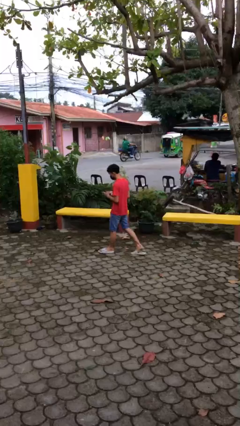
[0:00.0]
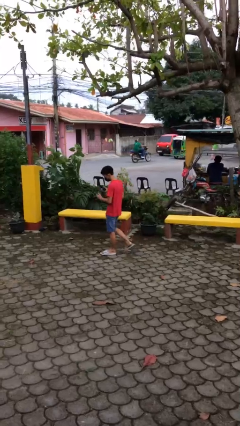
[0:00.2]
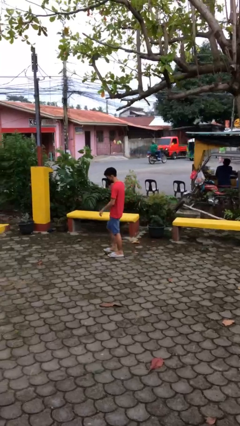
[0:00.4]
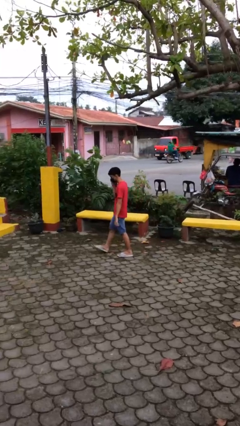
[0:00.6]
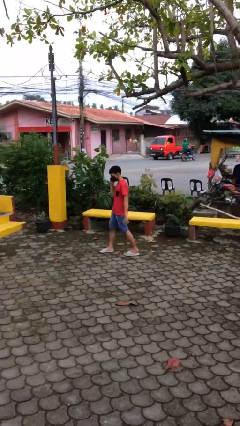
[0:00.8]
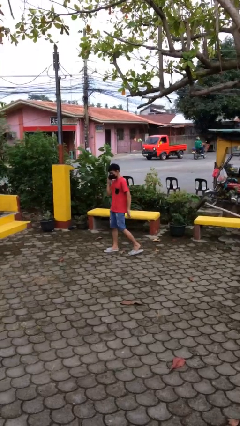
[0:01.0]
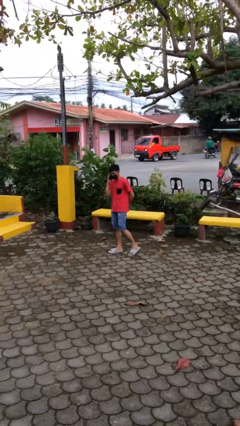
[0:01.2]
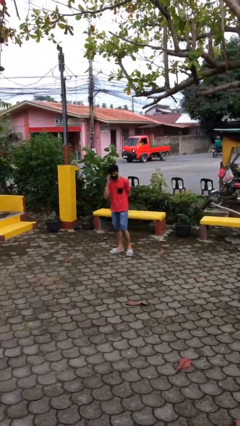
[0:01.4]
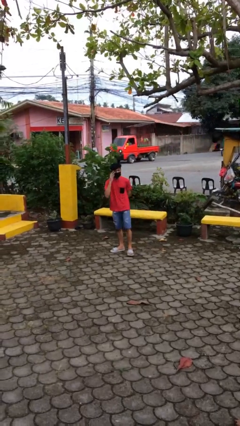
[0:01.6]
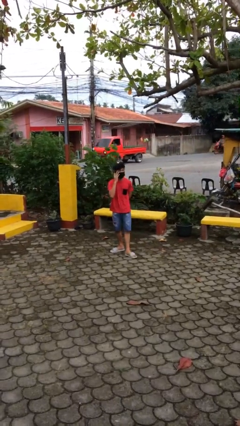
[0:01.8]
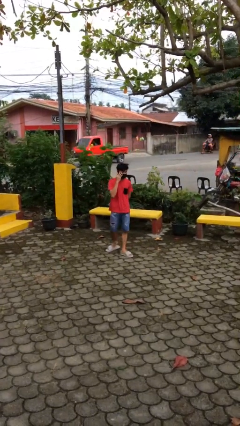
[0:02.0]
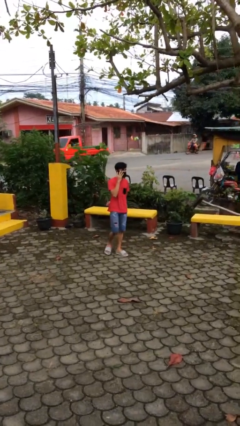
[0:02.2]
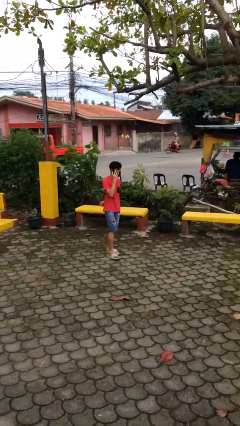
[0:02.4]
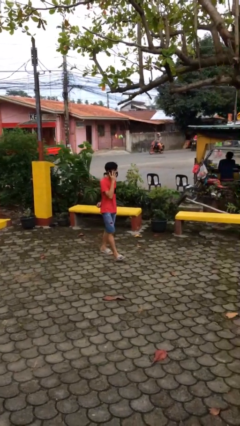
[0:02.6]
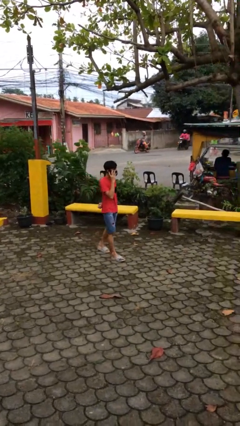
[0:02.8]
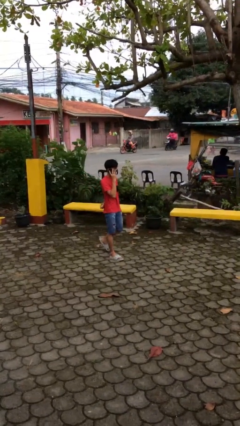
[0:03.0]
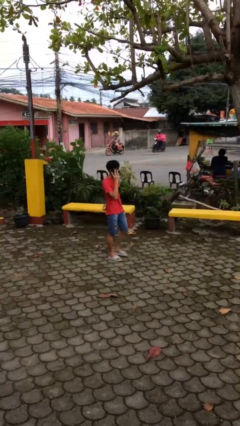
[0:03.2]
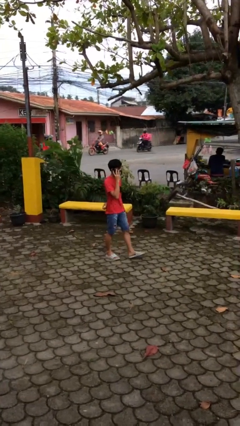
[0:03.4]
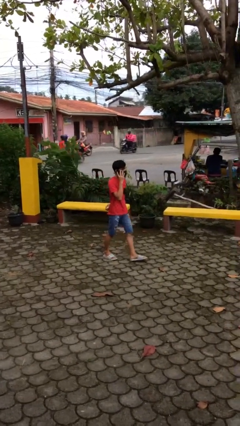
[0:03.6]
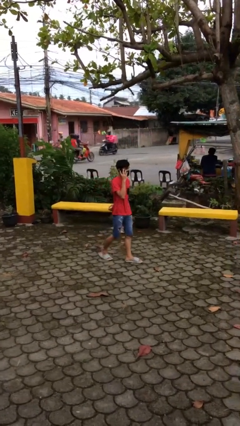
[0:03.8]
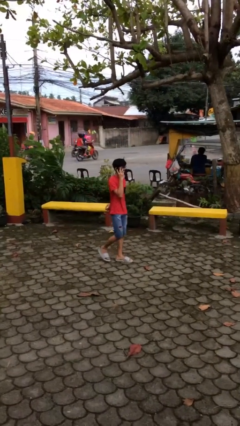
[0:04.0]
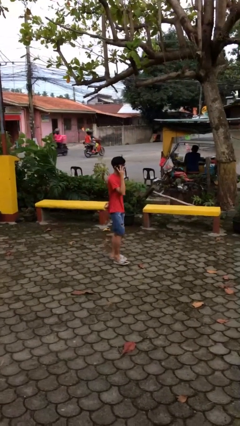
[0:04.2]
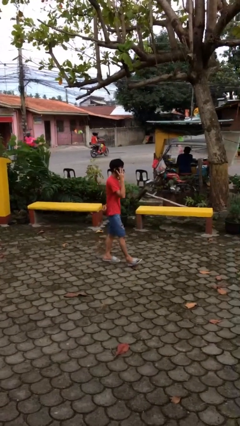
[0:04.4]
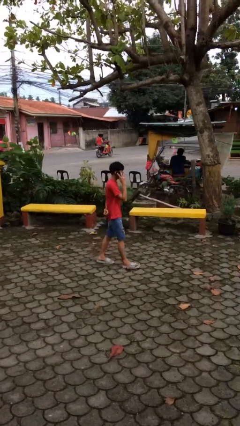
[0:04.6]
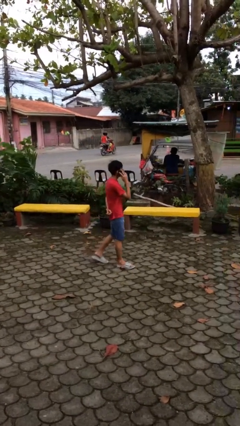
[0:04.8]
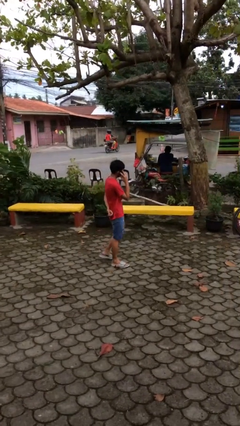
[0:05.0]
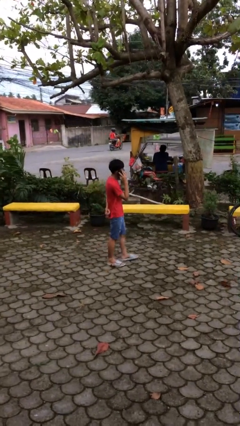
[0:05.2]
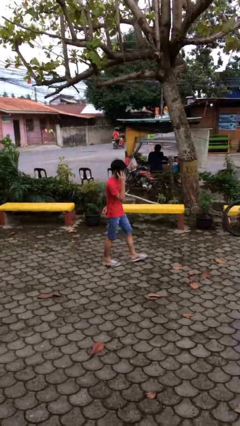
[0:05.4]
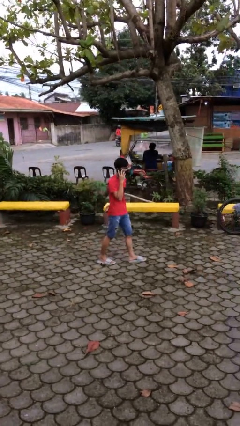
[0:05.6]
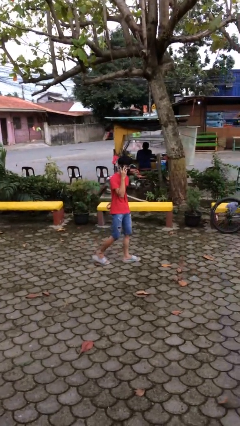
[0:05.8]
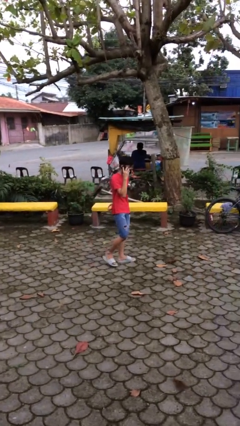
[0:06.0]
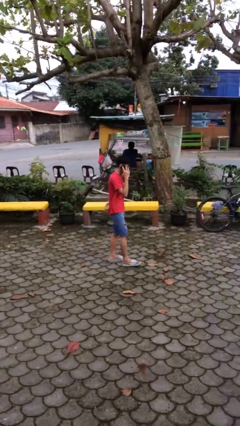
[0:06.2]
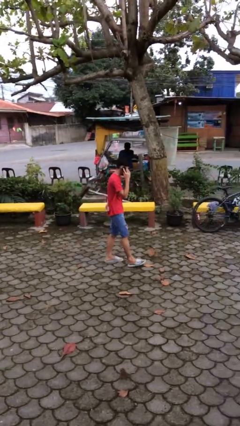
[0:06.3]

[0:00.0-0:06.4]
person talks on phone

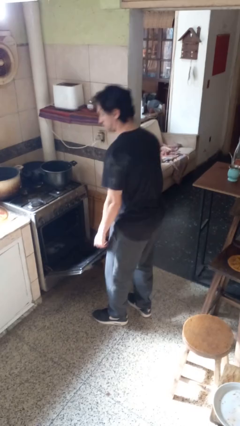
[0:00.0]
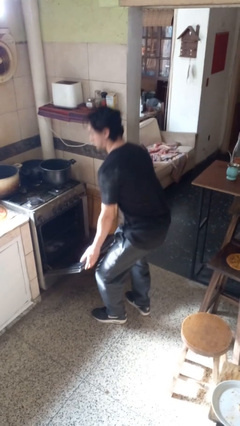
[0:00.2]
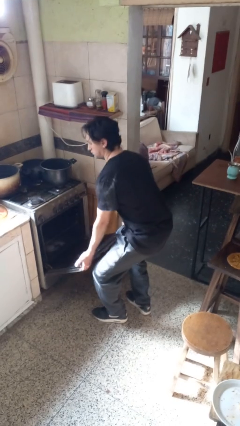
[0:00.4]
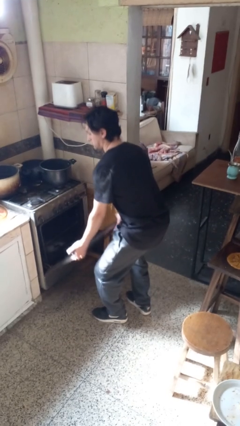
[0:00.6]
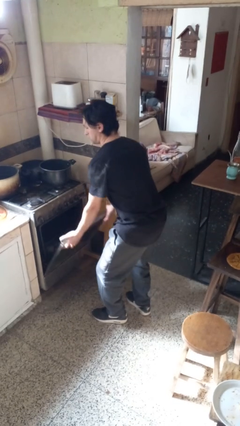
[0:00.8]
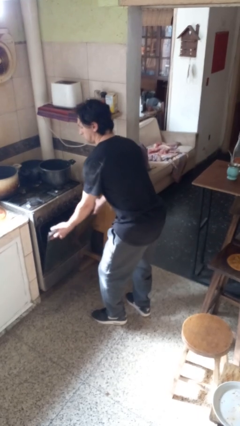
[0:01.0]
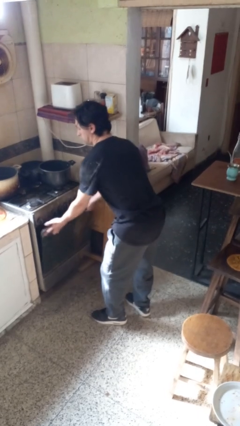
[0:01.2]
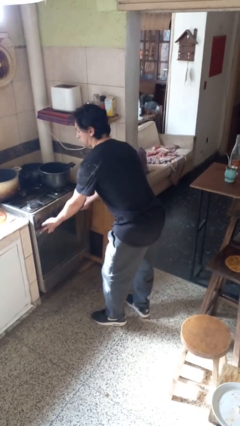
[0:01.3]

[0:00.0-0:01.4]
person closes oven door

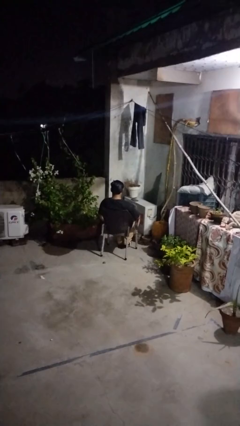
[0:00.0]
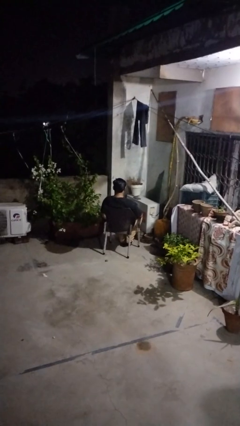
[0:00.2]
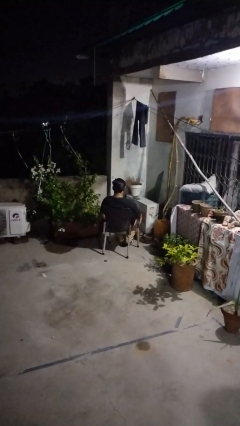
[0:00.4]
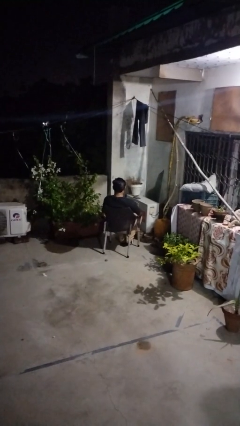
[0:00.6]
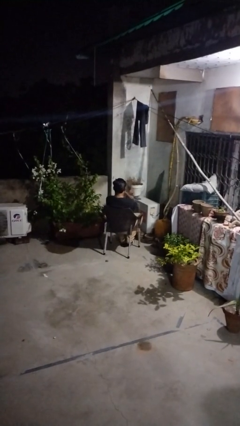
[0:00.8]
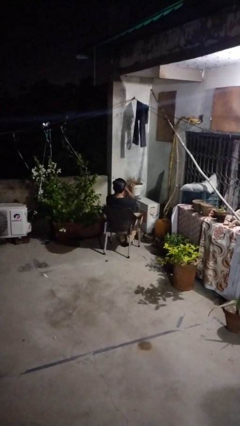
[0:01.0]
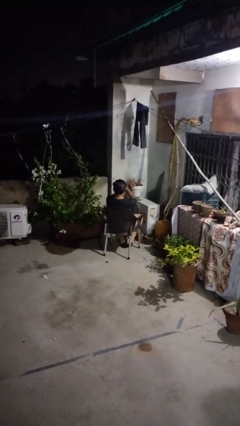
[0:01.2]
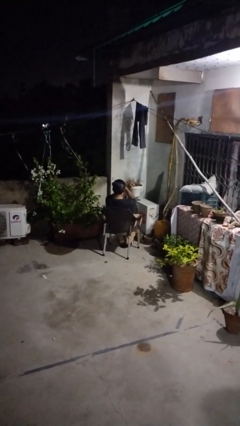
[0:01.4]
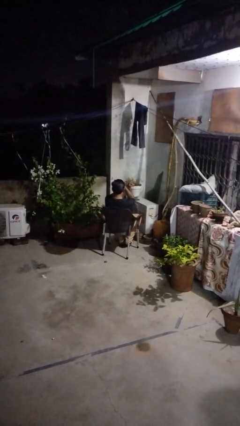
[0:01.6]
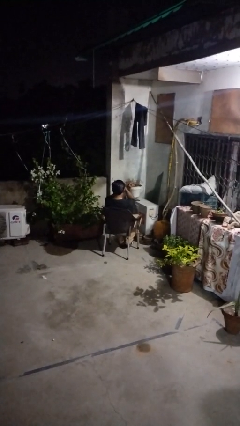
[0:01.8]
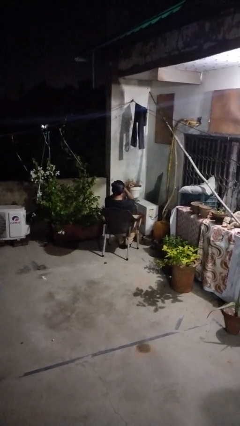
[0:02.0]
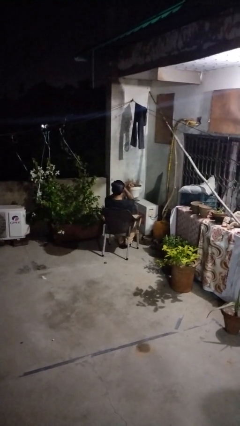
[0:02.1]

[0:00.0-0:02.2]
person gestures arms x

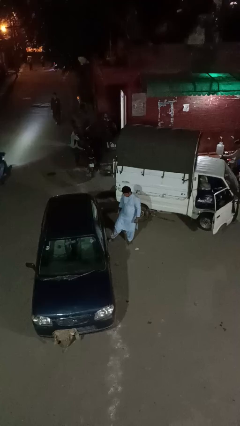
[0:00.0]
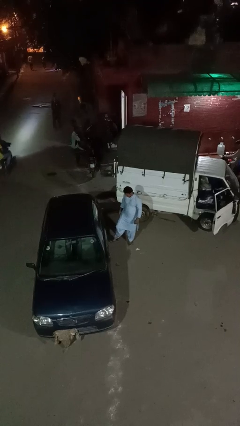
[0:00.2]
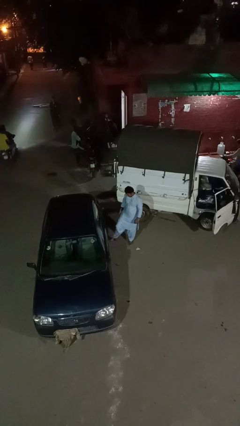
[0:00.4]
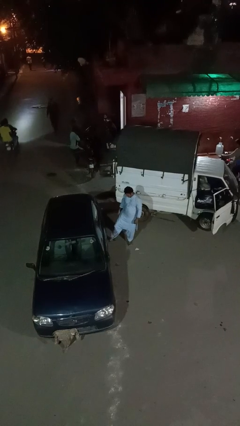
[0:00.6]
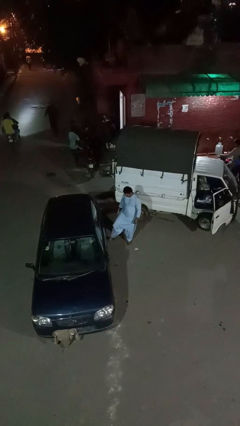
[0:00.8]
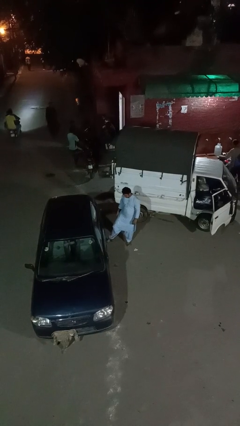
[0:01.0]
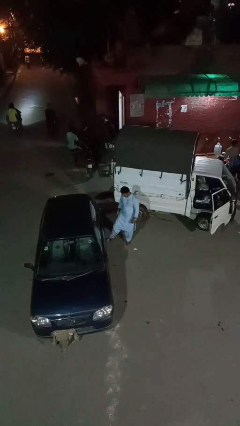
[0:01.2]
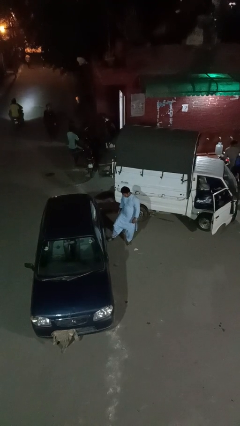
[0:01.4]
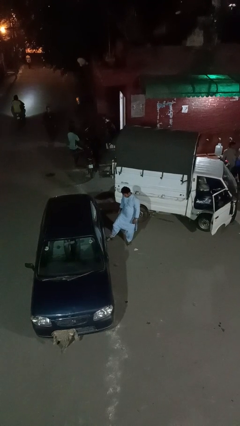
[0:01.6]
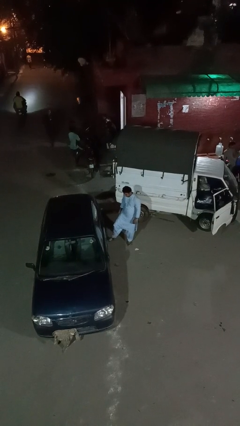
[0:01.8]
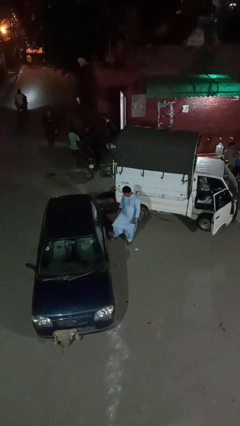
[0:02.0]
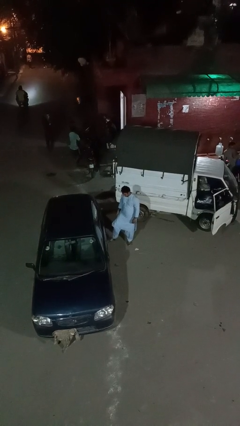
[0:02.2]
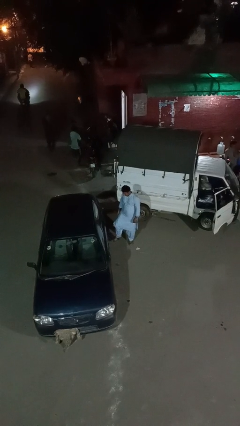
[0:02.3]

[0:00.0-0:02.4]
person kicks car tires

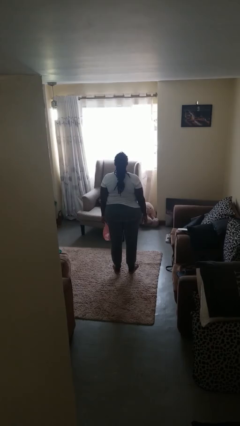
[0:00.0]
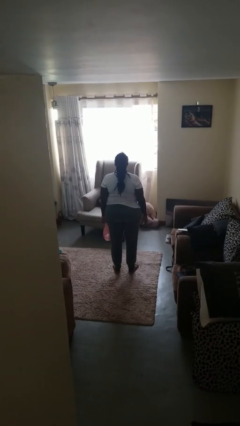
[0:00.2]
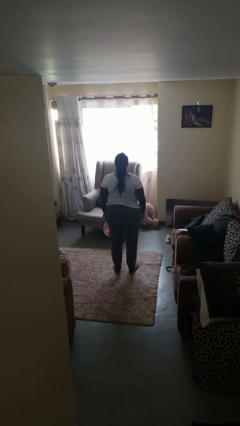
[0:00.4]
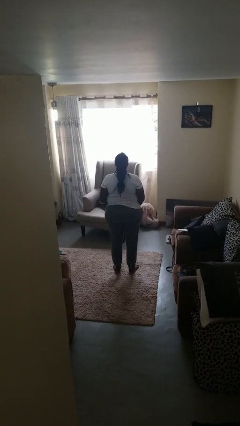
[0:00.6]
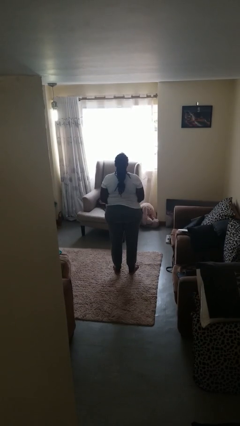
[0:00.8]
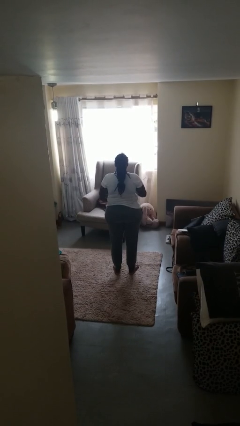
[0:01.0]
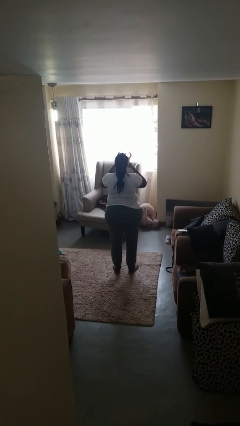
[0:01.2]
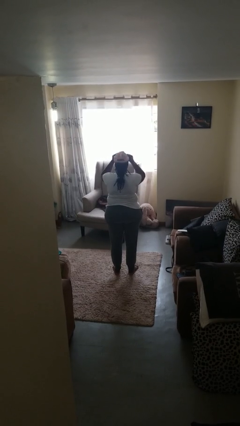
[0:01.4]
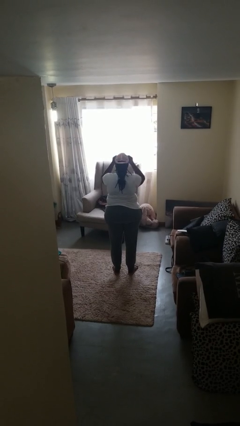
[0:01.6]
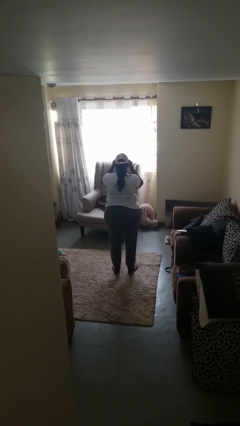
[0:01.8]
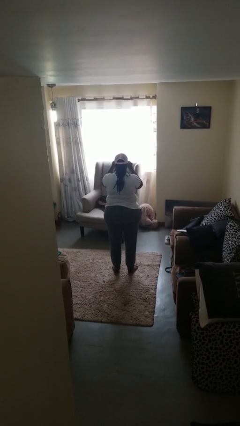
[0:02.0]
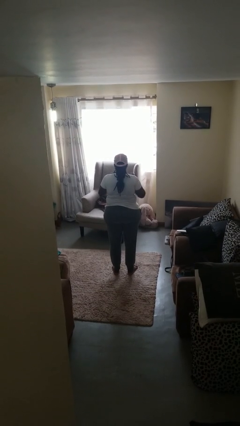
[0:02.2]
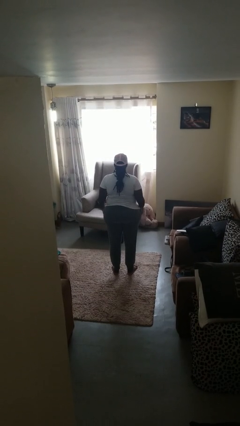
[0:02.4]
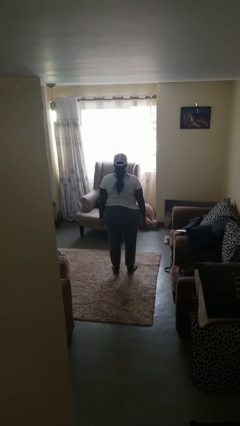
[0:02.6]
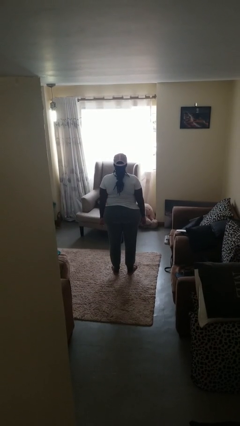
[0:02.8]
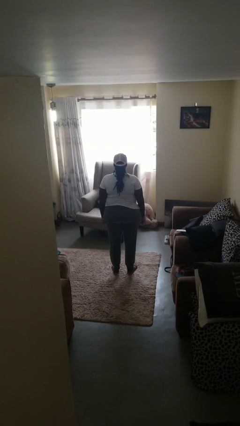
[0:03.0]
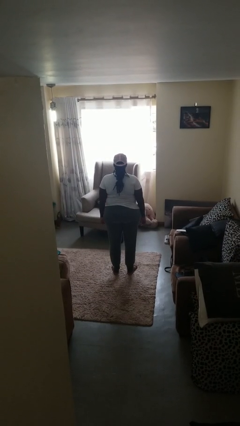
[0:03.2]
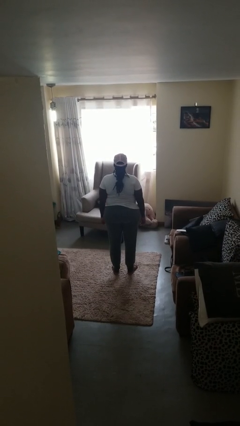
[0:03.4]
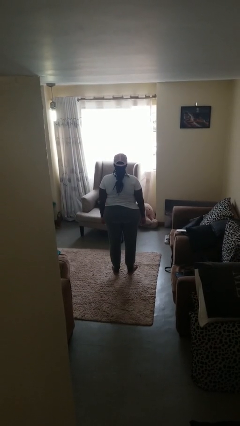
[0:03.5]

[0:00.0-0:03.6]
person puts on hat

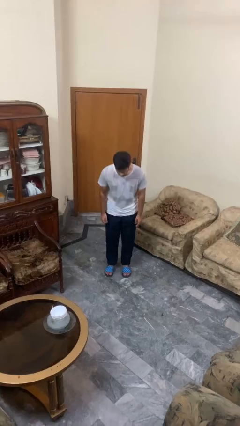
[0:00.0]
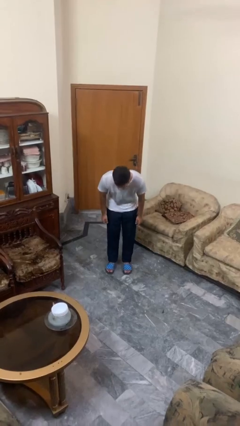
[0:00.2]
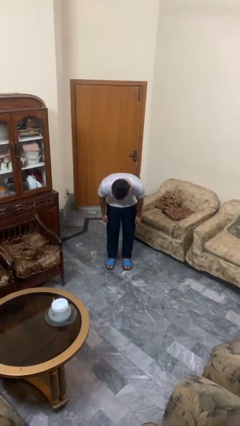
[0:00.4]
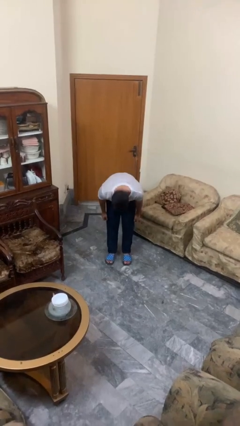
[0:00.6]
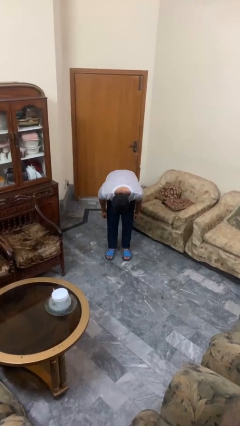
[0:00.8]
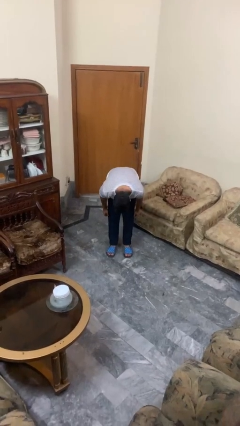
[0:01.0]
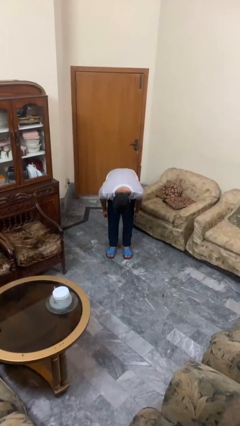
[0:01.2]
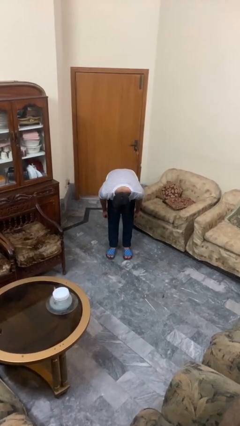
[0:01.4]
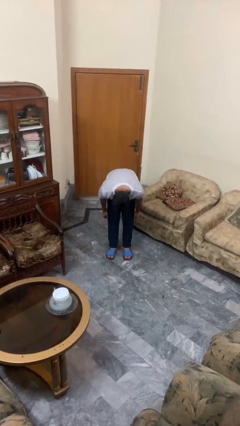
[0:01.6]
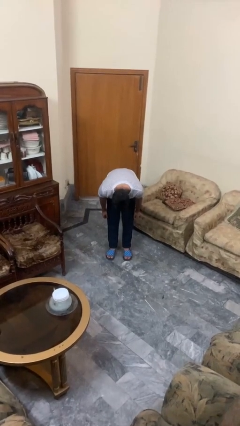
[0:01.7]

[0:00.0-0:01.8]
person bows
